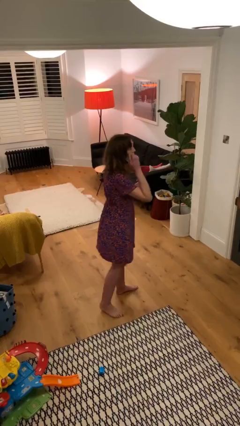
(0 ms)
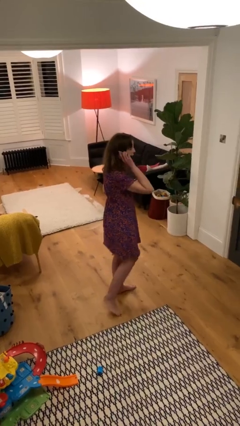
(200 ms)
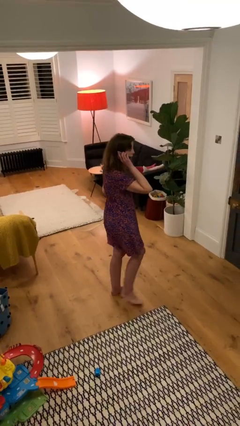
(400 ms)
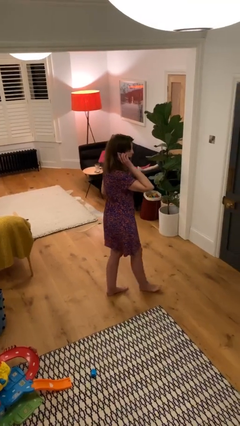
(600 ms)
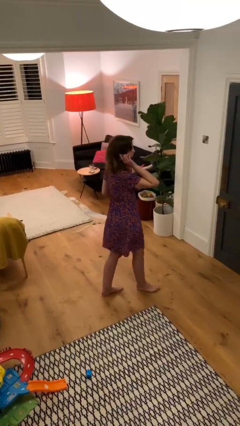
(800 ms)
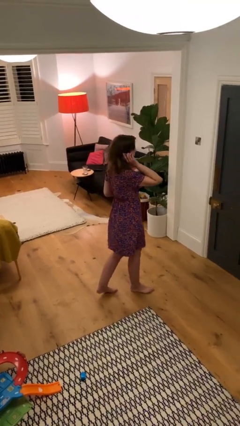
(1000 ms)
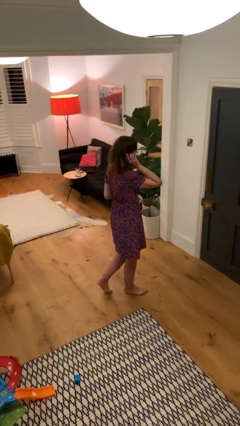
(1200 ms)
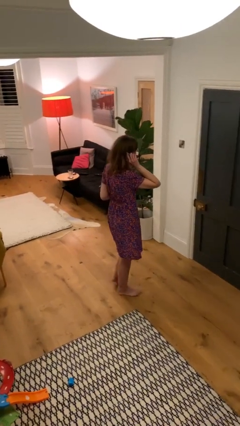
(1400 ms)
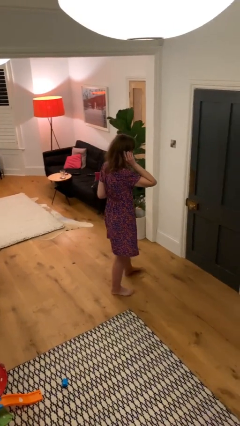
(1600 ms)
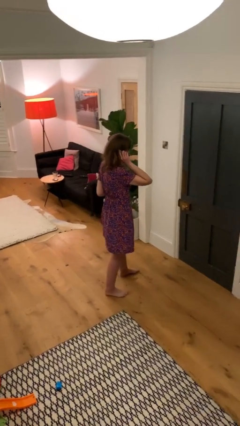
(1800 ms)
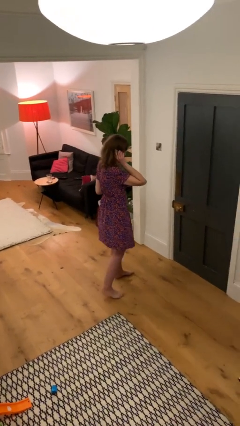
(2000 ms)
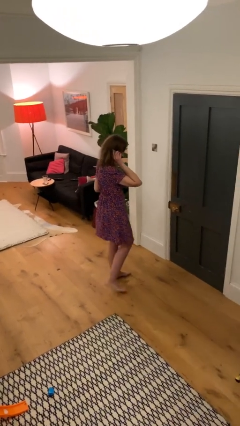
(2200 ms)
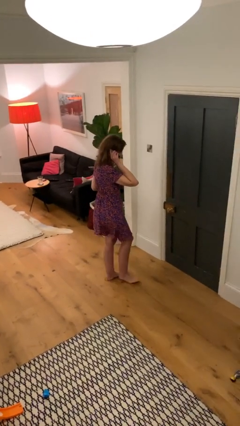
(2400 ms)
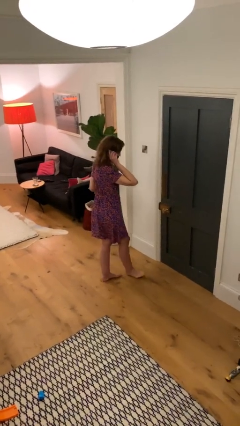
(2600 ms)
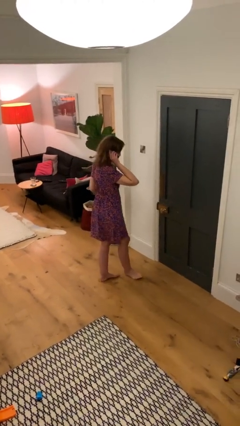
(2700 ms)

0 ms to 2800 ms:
person talks on phone

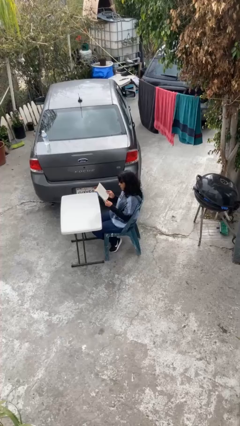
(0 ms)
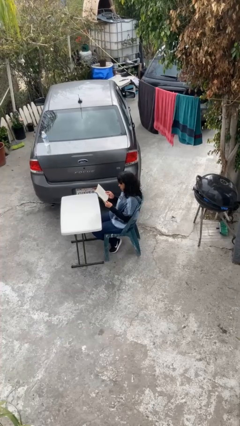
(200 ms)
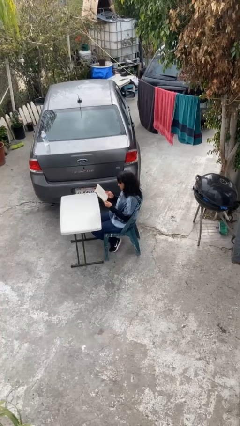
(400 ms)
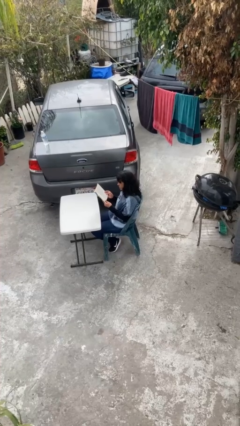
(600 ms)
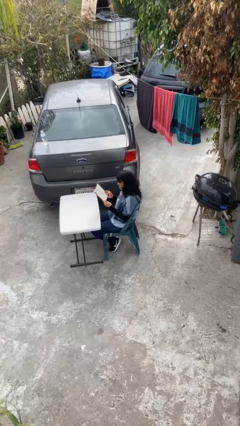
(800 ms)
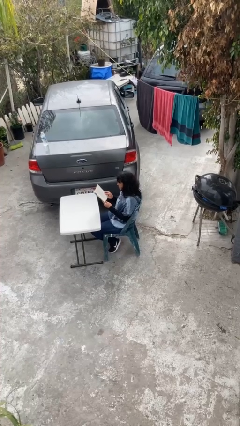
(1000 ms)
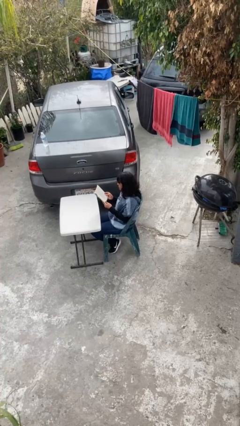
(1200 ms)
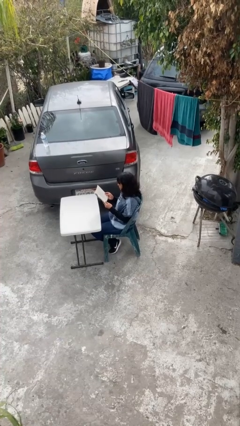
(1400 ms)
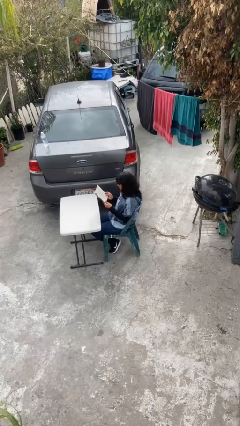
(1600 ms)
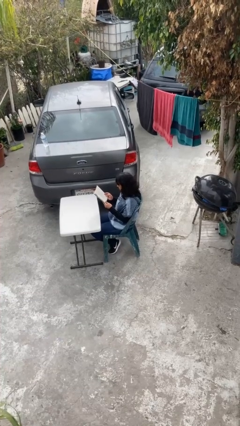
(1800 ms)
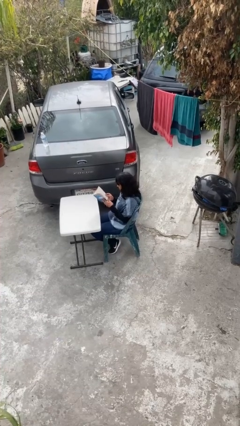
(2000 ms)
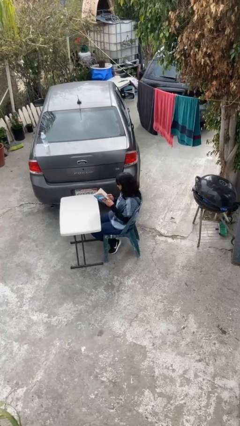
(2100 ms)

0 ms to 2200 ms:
person reads document

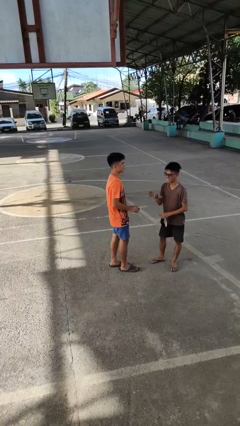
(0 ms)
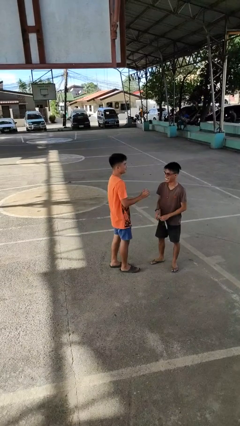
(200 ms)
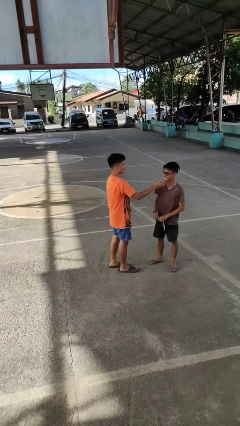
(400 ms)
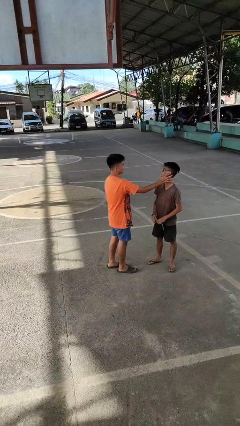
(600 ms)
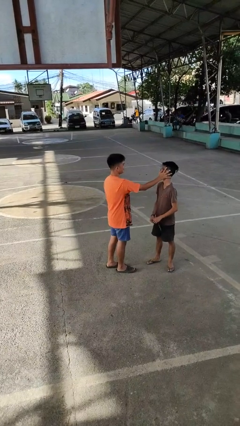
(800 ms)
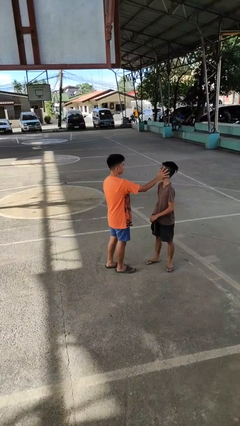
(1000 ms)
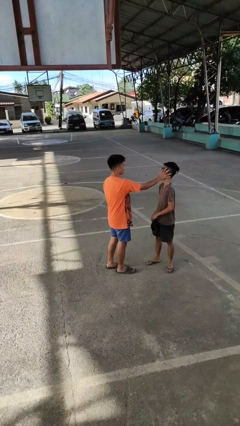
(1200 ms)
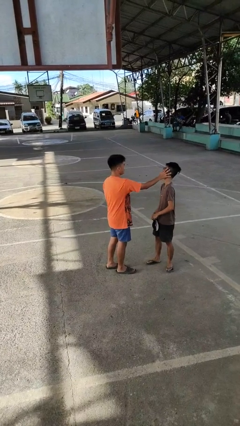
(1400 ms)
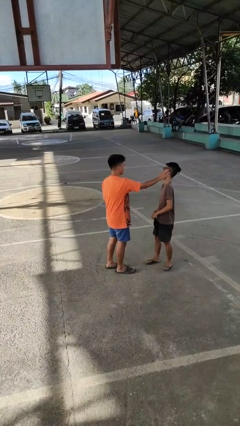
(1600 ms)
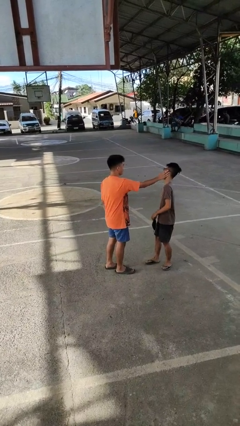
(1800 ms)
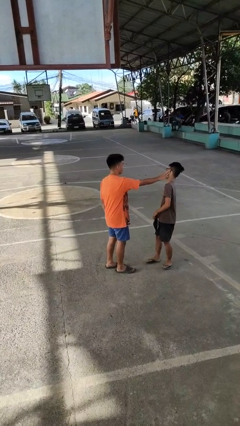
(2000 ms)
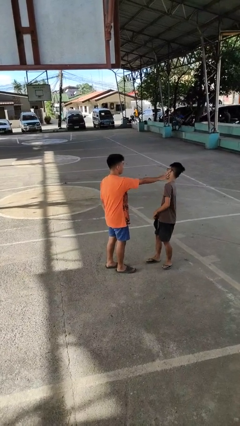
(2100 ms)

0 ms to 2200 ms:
person touches face of person

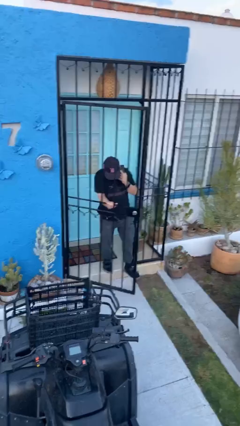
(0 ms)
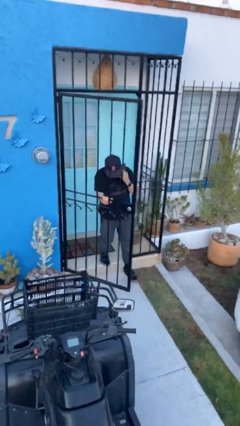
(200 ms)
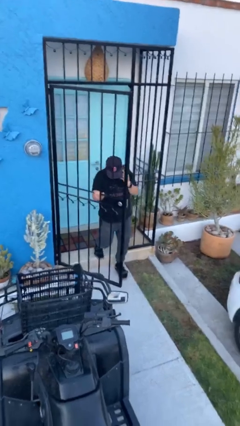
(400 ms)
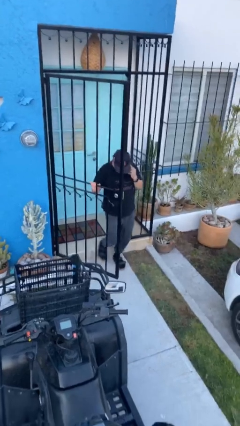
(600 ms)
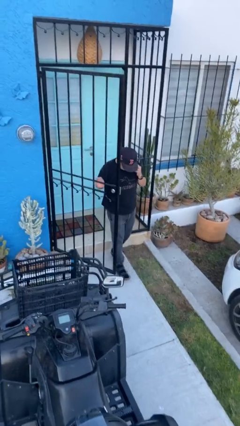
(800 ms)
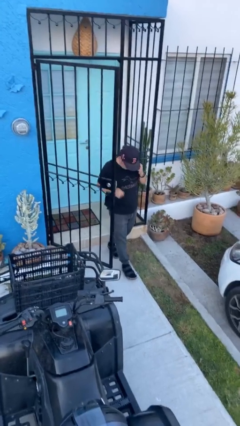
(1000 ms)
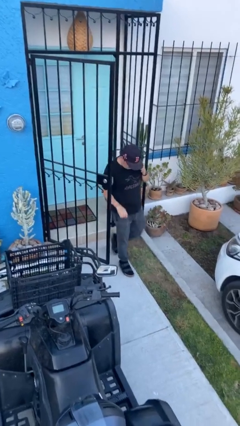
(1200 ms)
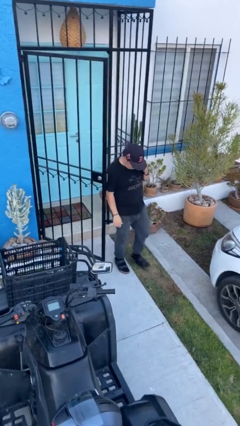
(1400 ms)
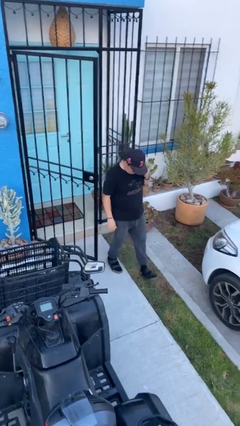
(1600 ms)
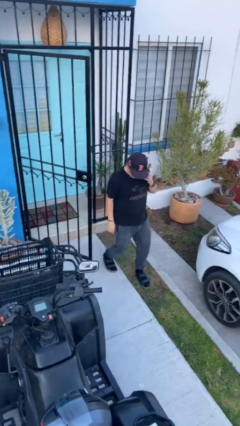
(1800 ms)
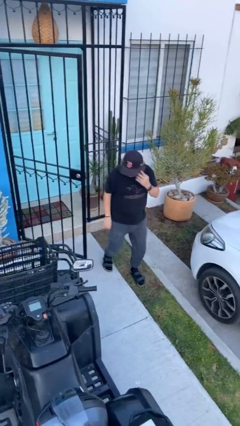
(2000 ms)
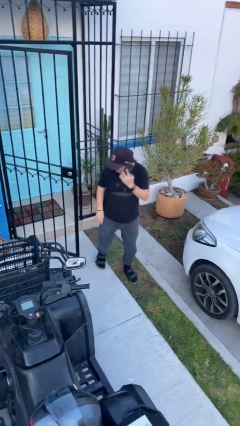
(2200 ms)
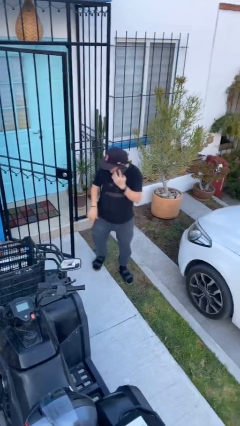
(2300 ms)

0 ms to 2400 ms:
person enters scene through structure

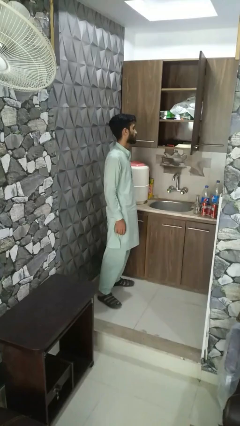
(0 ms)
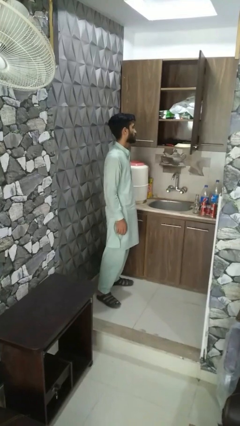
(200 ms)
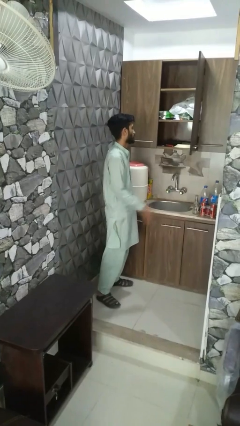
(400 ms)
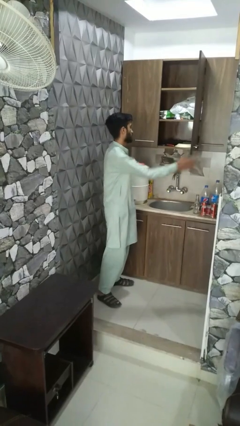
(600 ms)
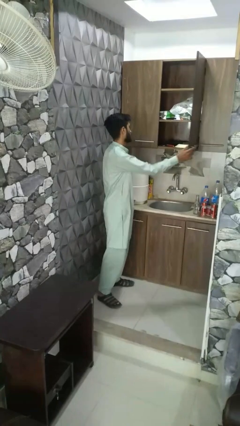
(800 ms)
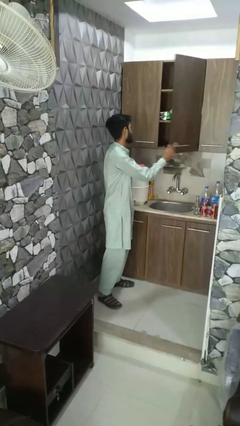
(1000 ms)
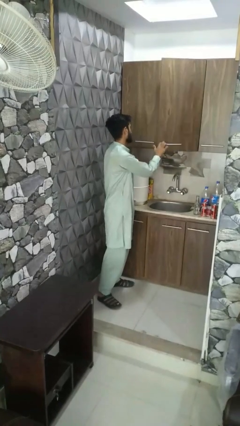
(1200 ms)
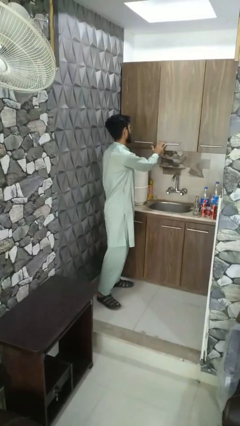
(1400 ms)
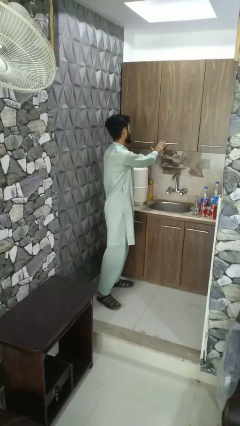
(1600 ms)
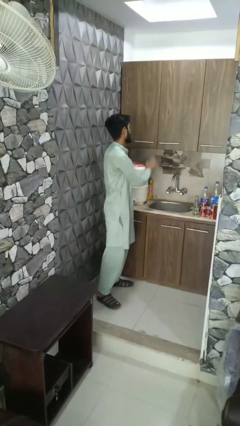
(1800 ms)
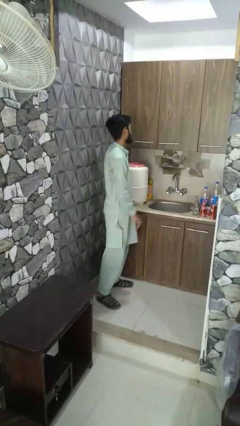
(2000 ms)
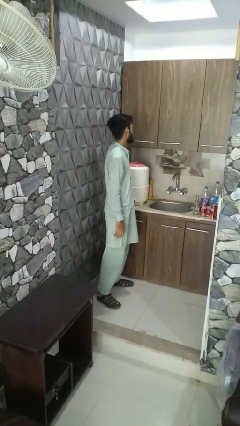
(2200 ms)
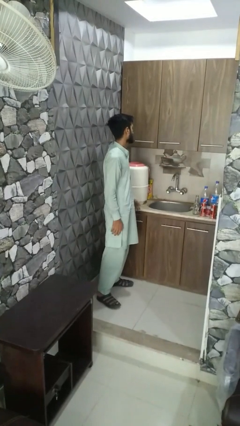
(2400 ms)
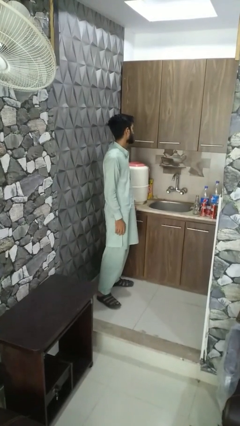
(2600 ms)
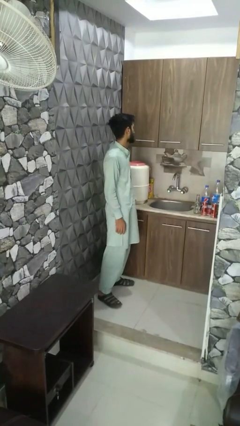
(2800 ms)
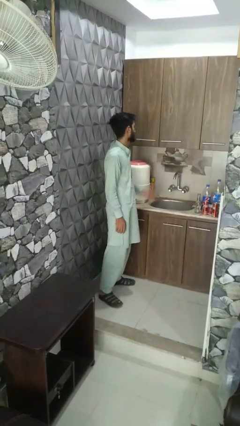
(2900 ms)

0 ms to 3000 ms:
person closes cabinet

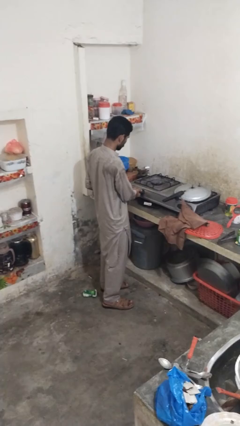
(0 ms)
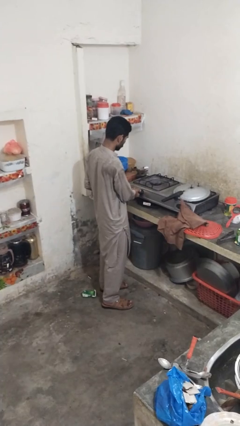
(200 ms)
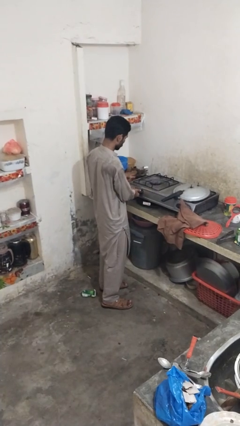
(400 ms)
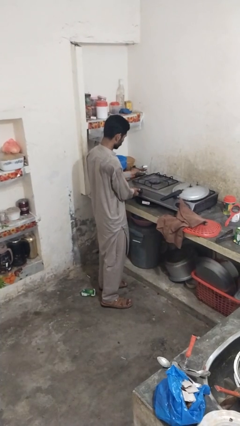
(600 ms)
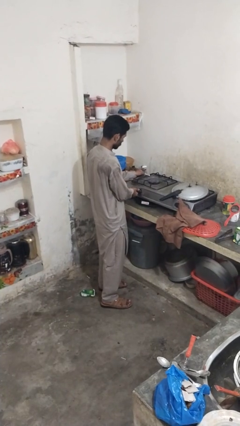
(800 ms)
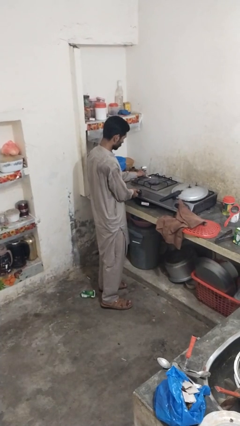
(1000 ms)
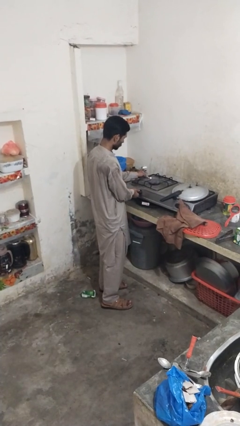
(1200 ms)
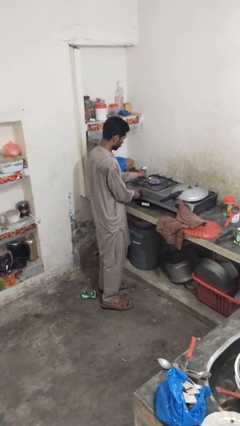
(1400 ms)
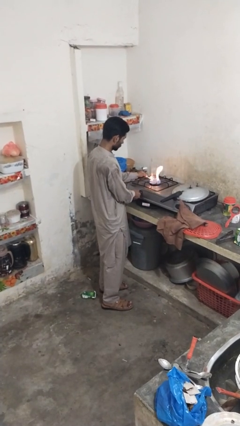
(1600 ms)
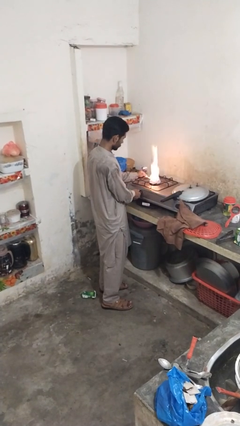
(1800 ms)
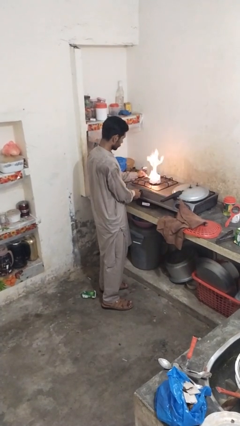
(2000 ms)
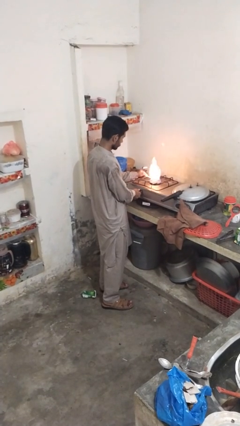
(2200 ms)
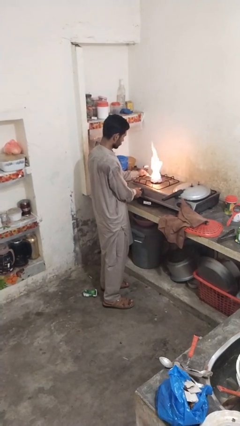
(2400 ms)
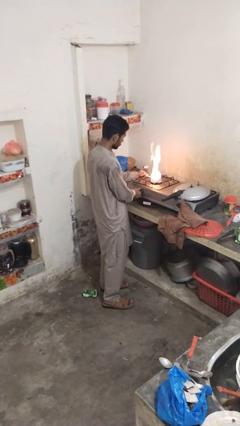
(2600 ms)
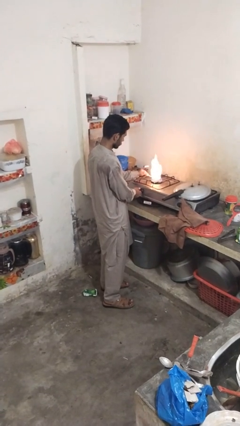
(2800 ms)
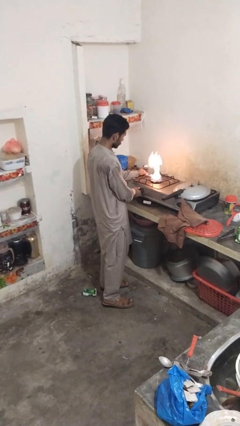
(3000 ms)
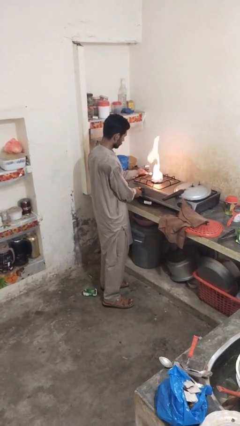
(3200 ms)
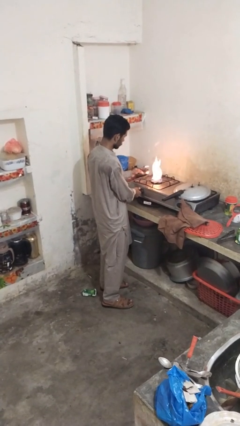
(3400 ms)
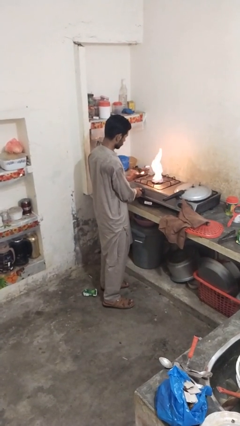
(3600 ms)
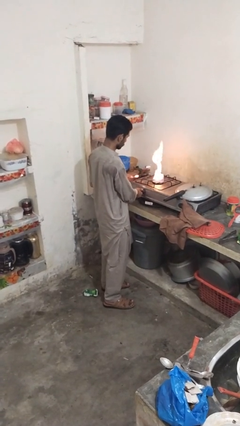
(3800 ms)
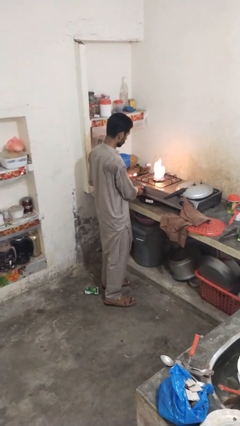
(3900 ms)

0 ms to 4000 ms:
person turns on stovetop

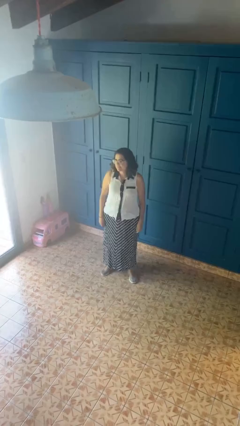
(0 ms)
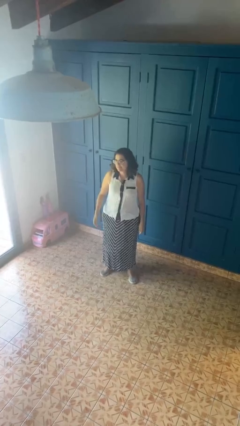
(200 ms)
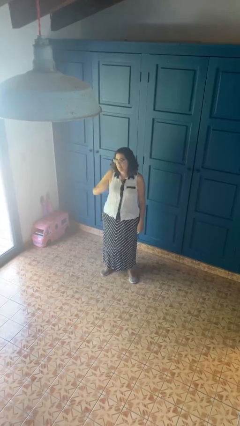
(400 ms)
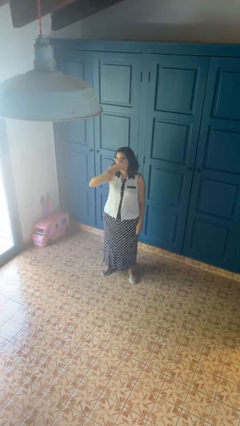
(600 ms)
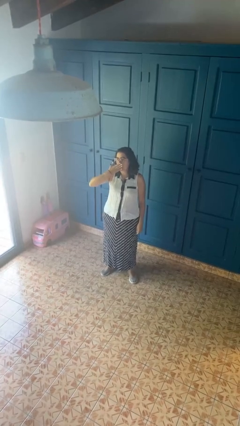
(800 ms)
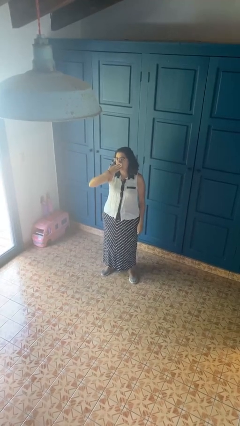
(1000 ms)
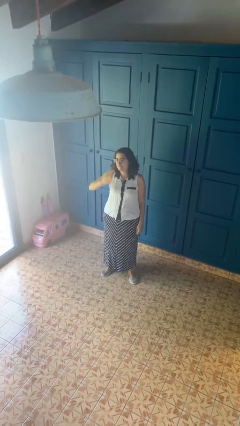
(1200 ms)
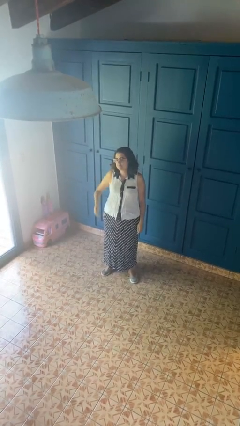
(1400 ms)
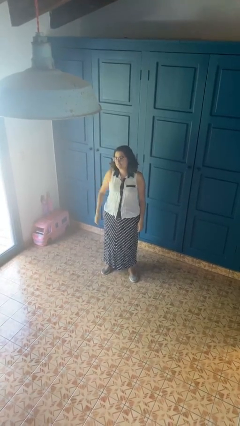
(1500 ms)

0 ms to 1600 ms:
person yawns
